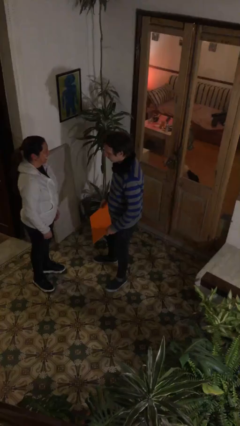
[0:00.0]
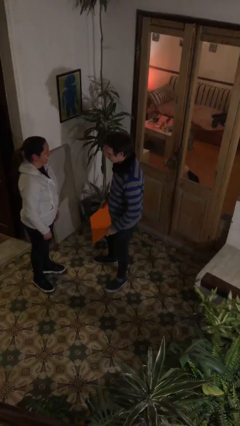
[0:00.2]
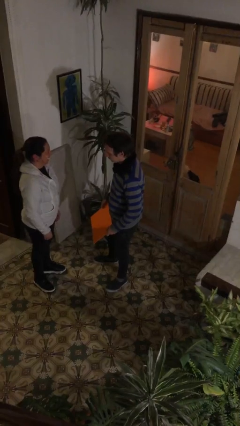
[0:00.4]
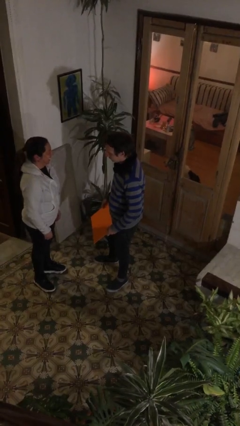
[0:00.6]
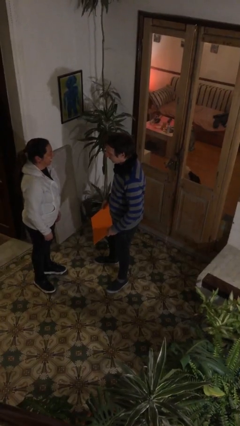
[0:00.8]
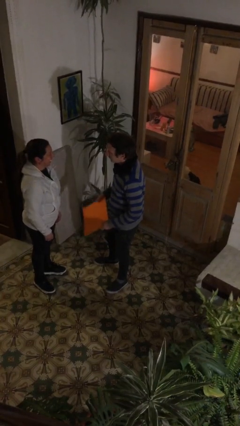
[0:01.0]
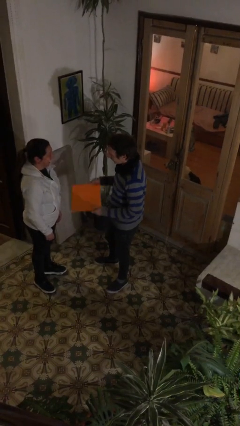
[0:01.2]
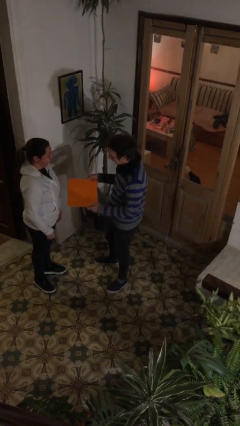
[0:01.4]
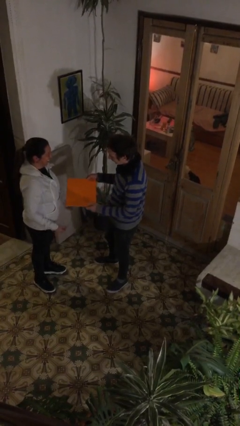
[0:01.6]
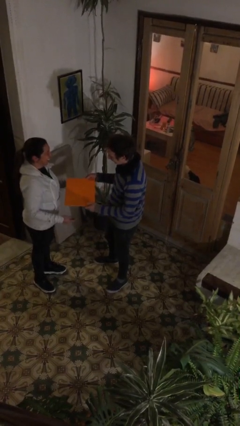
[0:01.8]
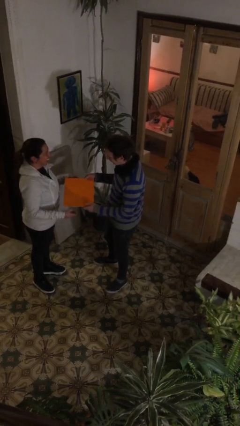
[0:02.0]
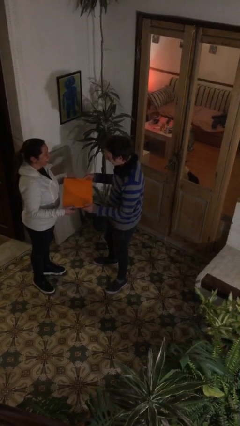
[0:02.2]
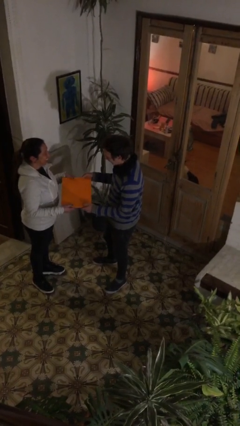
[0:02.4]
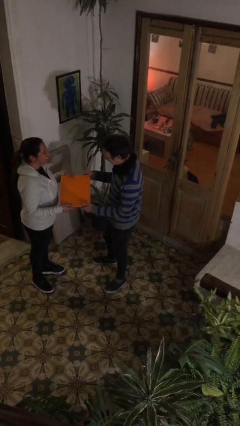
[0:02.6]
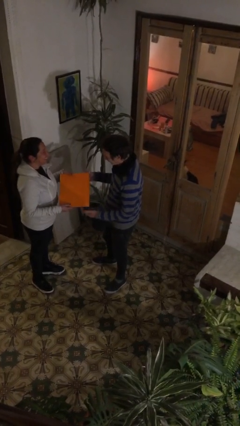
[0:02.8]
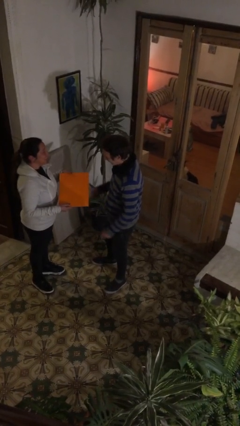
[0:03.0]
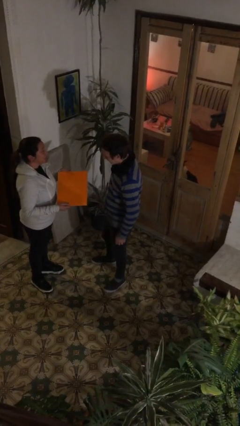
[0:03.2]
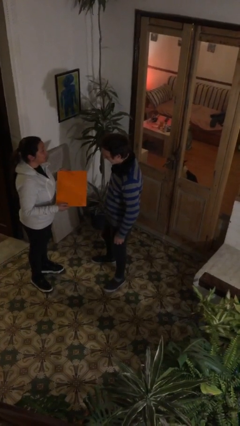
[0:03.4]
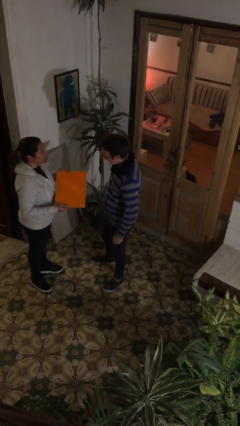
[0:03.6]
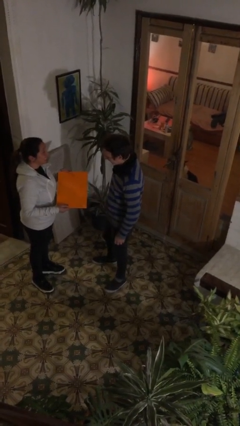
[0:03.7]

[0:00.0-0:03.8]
person transfers object to person

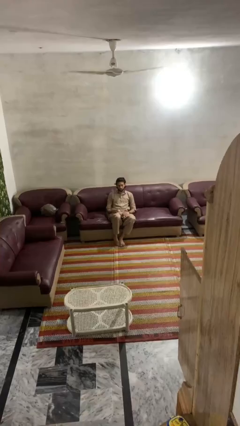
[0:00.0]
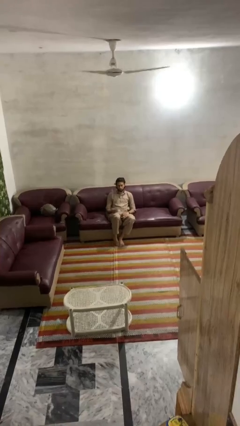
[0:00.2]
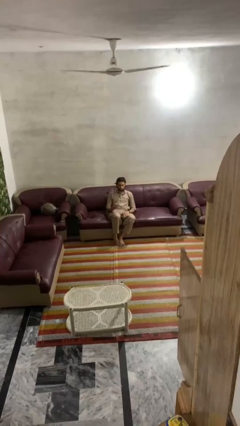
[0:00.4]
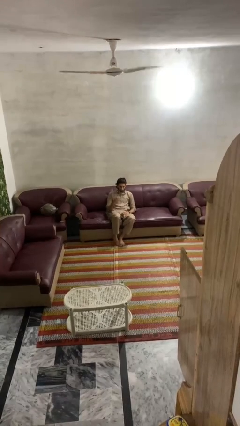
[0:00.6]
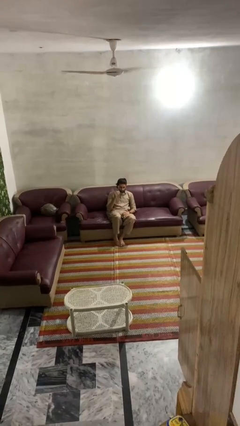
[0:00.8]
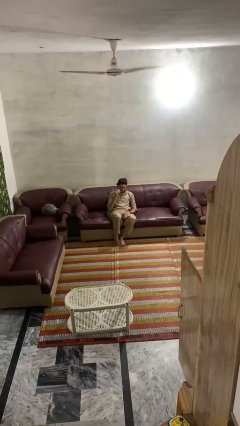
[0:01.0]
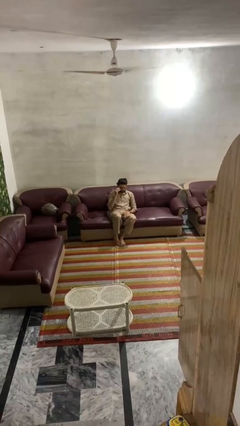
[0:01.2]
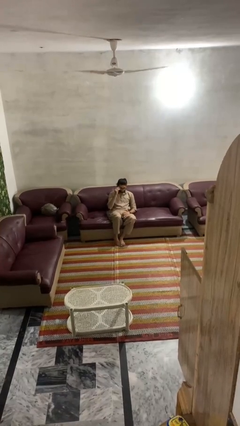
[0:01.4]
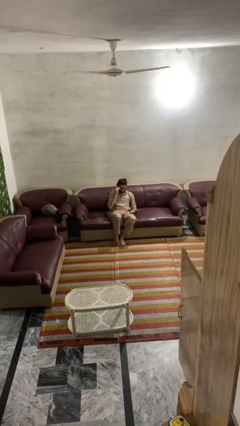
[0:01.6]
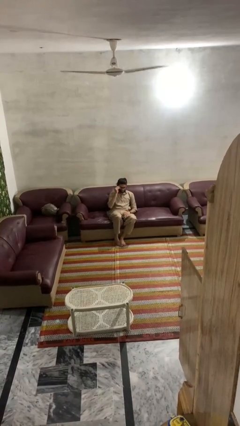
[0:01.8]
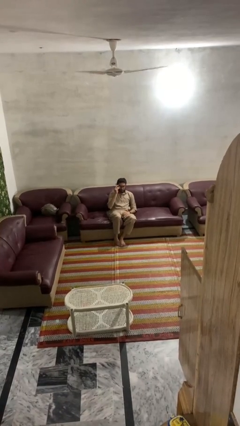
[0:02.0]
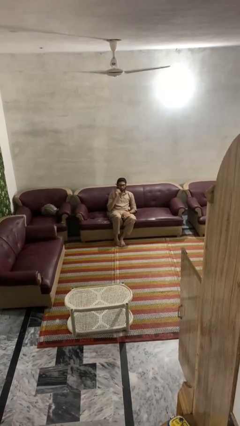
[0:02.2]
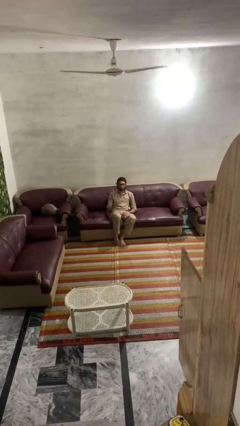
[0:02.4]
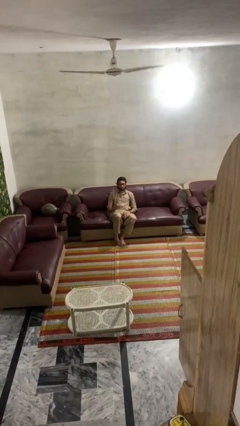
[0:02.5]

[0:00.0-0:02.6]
person puts on glasses

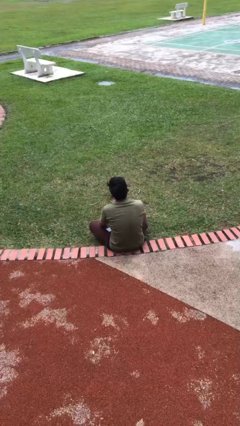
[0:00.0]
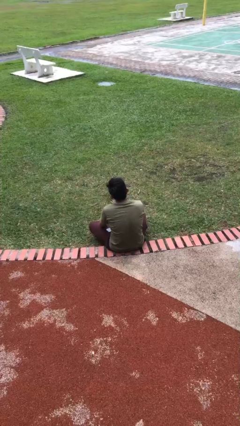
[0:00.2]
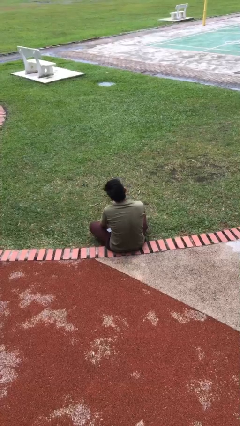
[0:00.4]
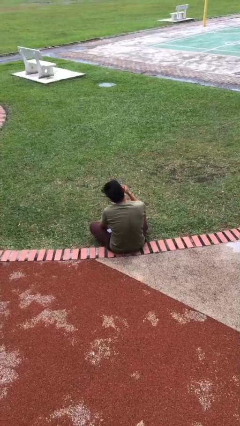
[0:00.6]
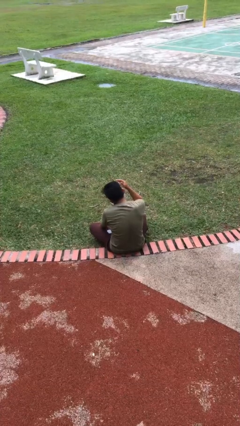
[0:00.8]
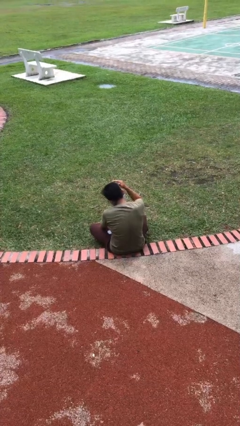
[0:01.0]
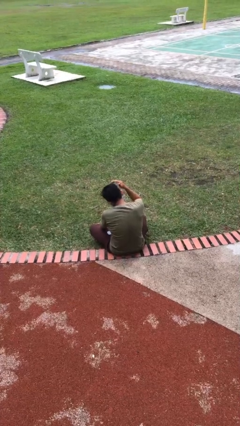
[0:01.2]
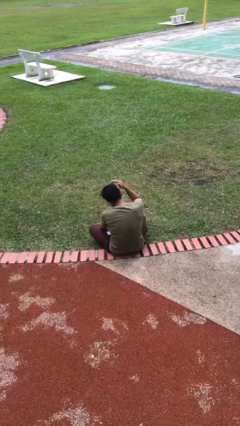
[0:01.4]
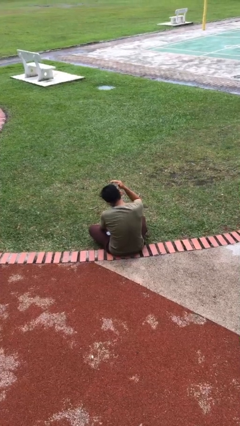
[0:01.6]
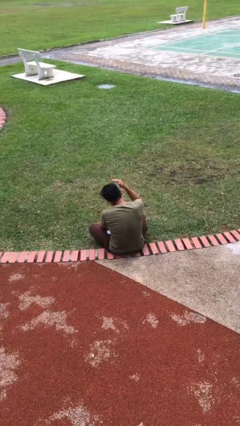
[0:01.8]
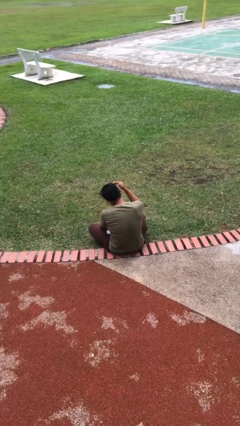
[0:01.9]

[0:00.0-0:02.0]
person shades eyes

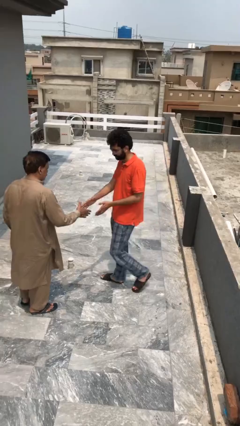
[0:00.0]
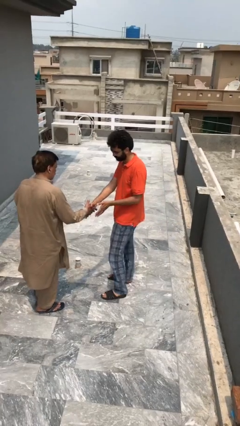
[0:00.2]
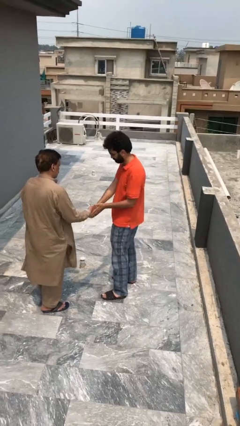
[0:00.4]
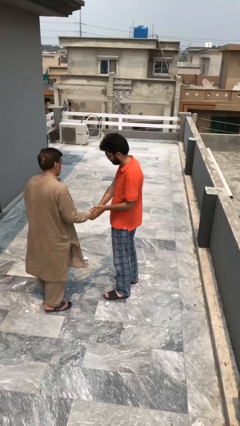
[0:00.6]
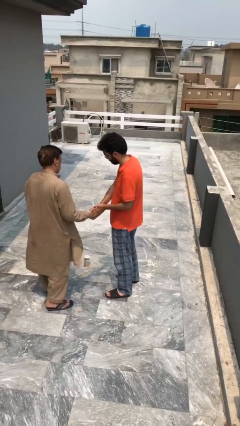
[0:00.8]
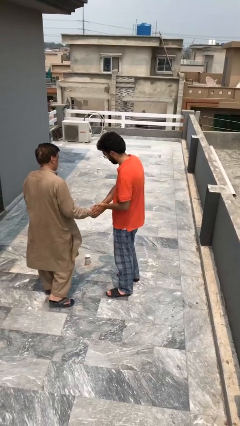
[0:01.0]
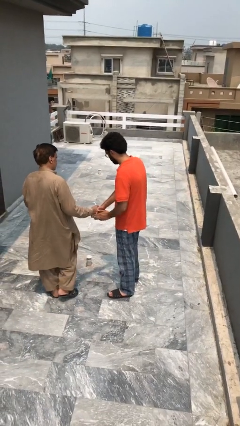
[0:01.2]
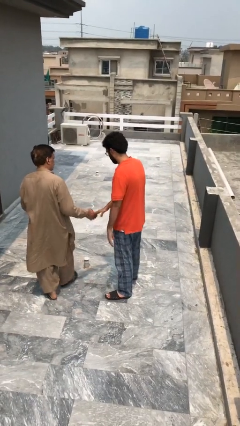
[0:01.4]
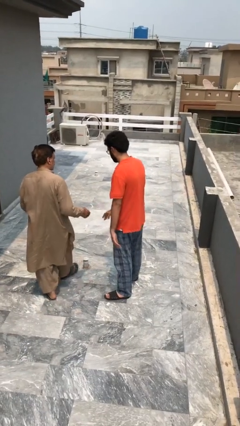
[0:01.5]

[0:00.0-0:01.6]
person shakes hand

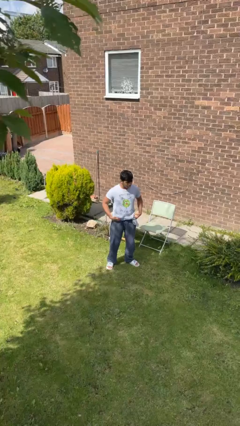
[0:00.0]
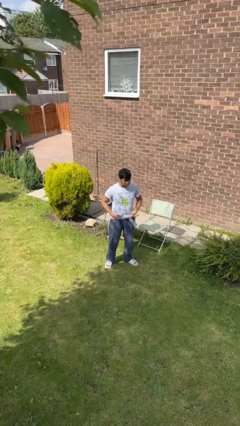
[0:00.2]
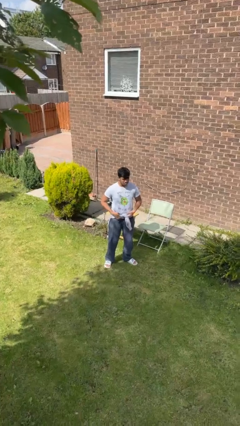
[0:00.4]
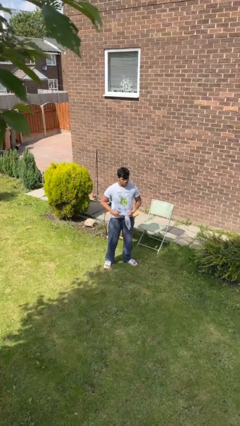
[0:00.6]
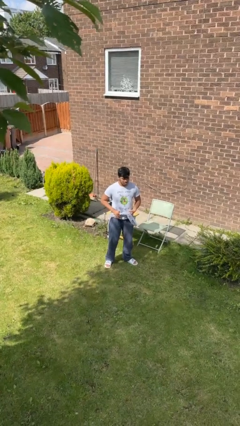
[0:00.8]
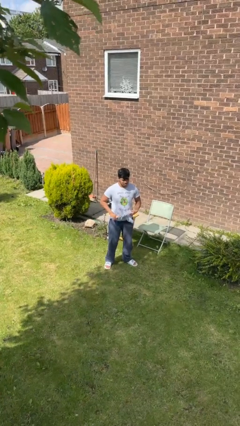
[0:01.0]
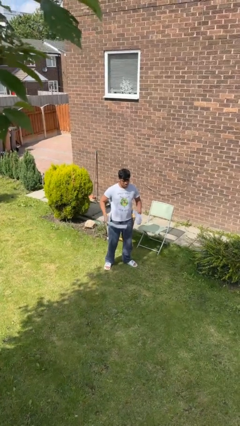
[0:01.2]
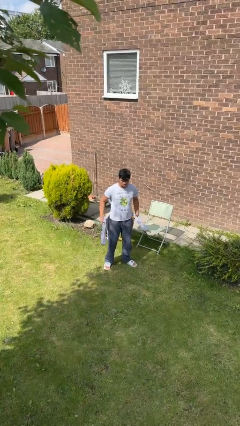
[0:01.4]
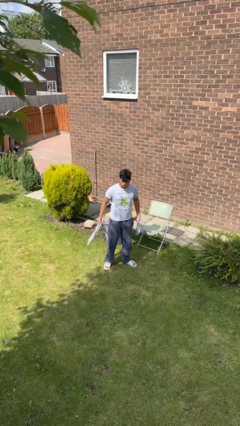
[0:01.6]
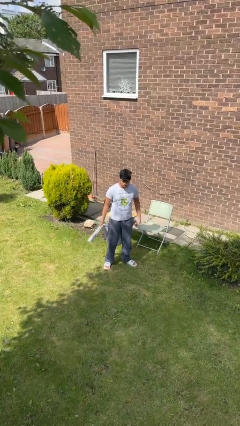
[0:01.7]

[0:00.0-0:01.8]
person unties jacket around waist

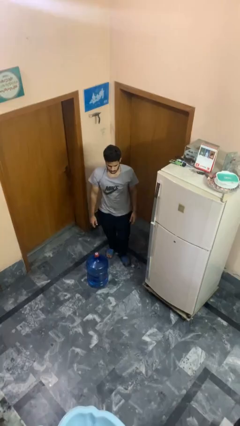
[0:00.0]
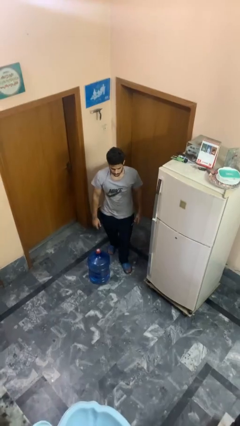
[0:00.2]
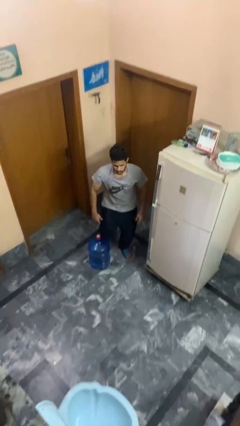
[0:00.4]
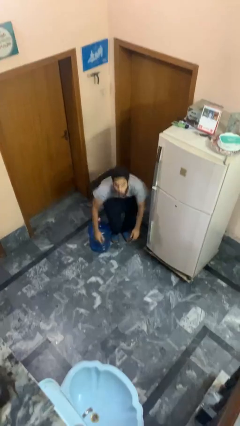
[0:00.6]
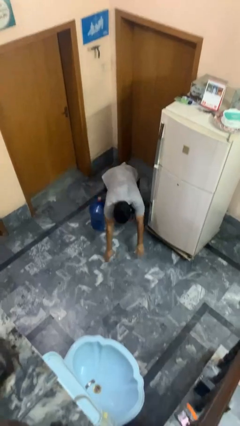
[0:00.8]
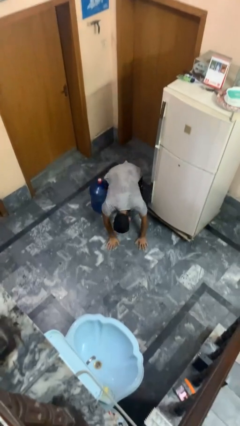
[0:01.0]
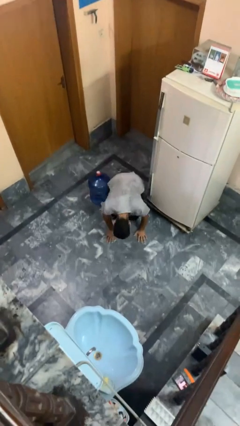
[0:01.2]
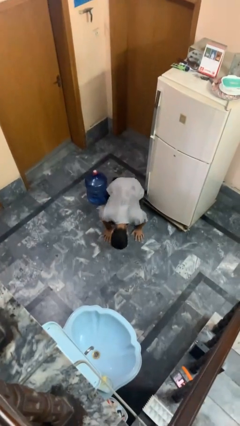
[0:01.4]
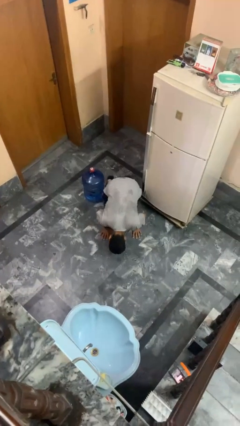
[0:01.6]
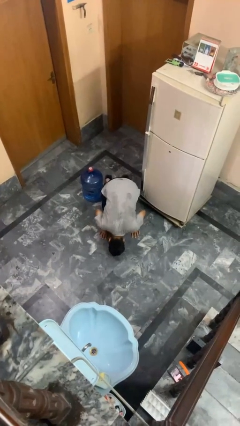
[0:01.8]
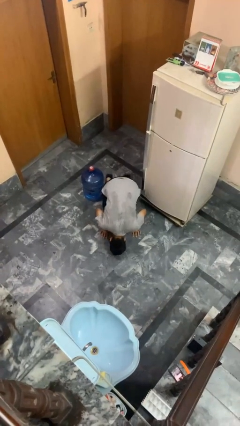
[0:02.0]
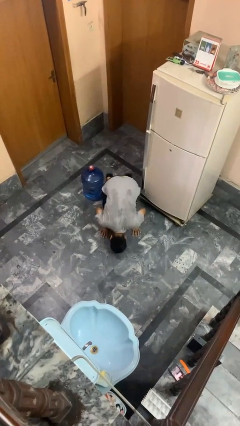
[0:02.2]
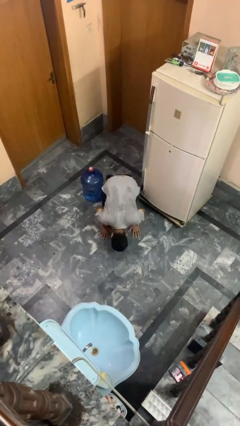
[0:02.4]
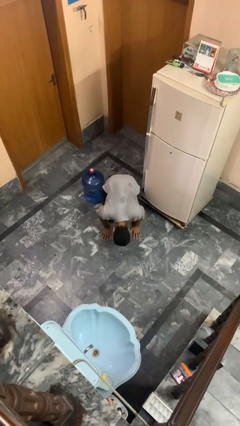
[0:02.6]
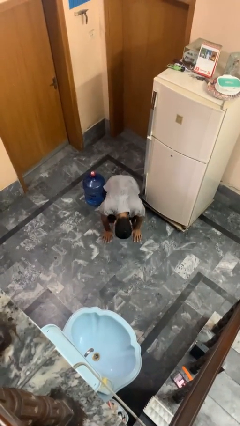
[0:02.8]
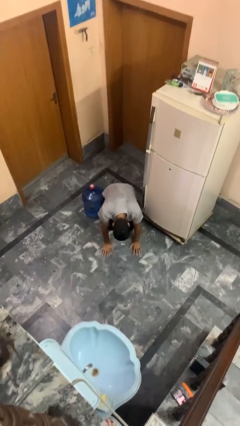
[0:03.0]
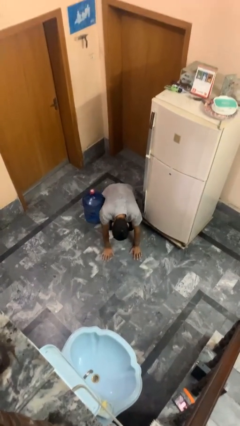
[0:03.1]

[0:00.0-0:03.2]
person trips on object on floor

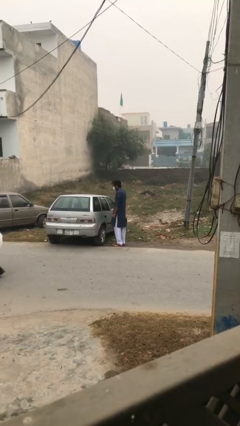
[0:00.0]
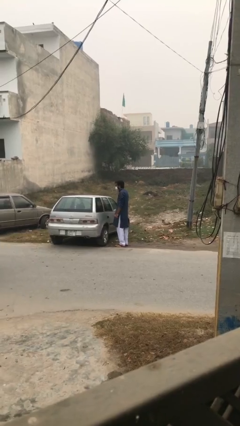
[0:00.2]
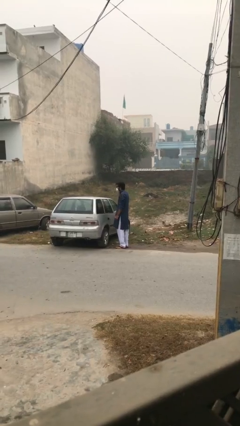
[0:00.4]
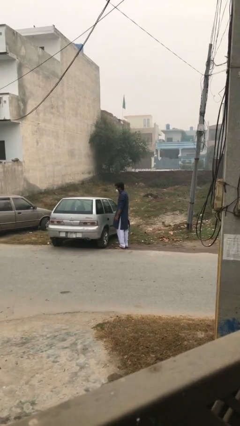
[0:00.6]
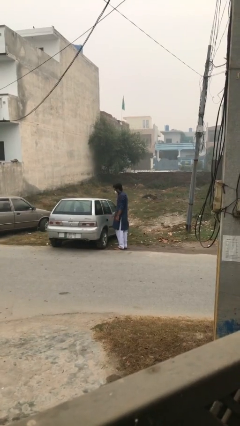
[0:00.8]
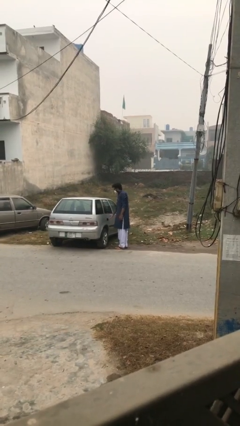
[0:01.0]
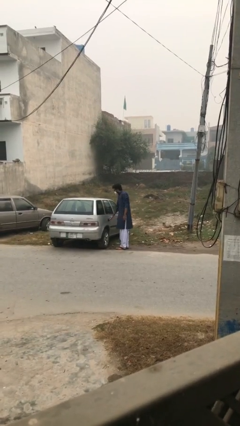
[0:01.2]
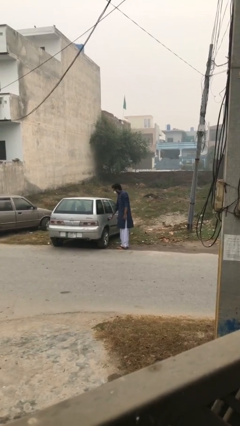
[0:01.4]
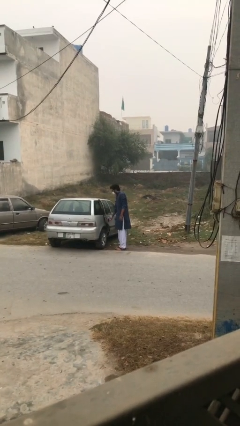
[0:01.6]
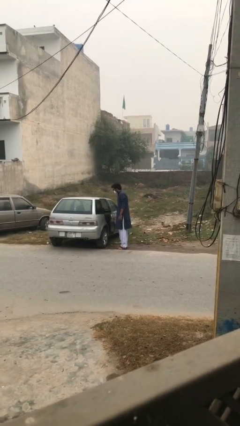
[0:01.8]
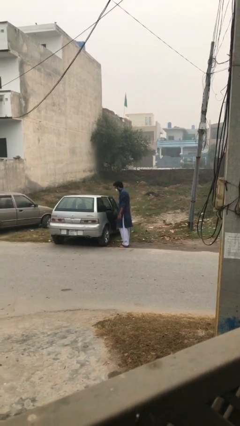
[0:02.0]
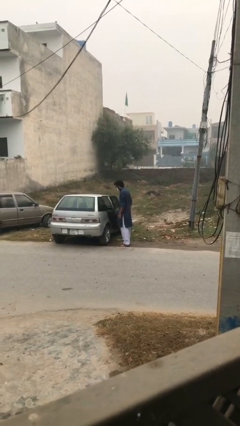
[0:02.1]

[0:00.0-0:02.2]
person opens car door
